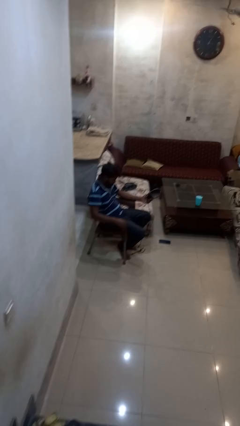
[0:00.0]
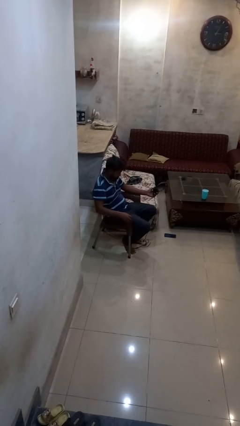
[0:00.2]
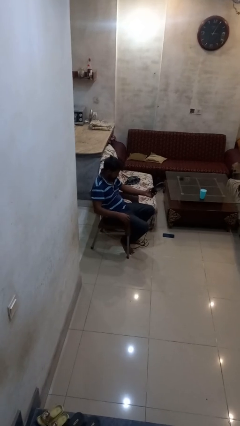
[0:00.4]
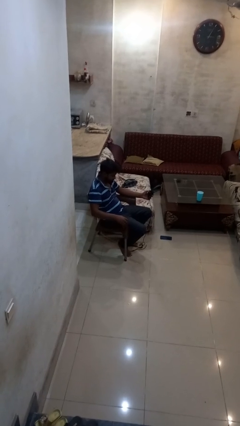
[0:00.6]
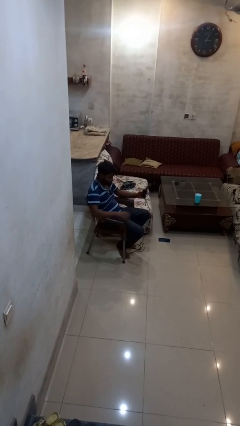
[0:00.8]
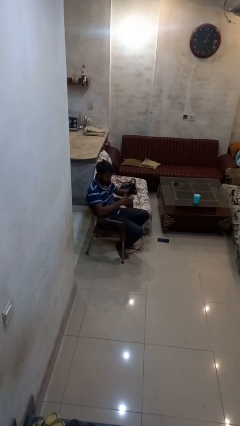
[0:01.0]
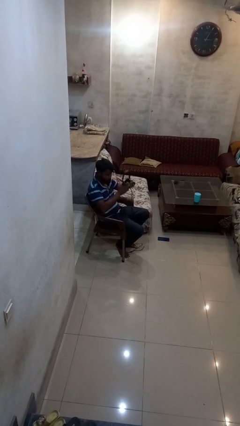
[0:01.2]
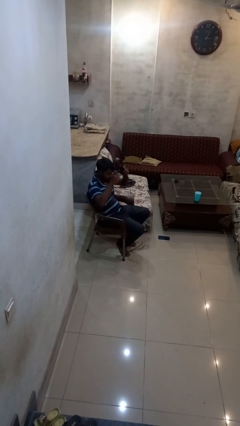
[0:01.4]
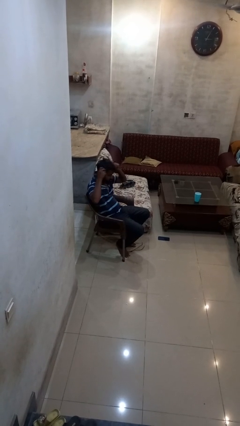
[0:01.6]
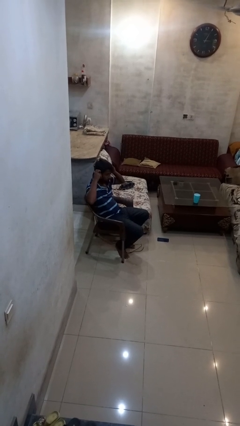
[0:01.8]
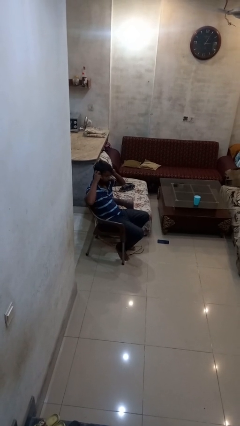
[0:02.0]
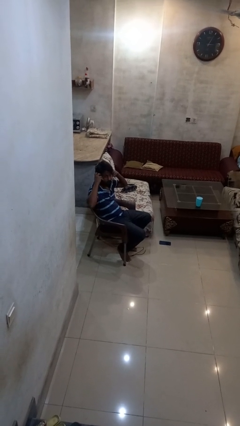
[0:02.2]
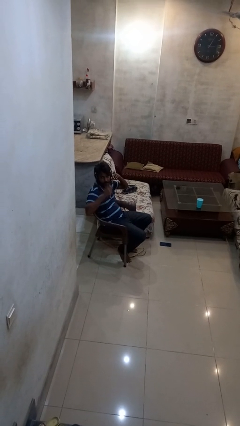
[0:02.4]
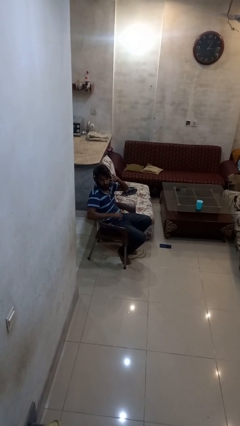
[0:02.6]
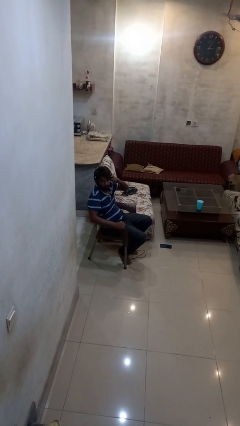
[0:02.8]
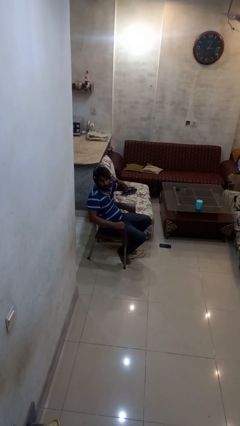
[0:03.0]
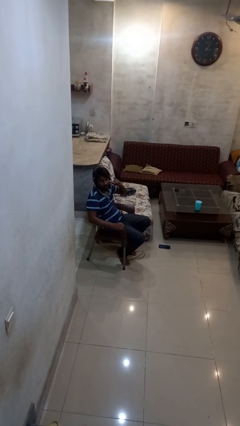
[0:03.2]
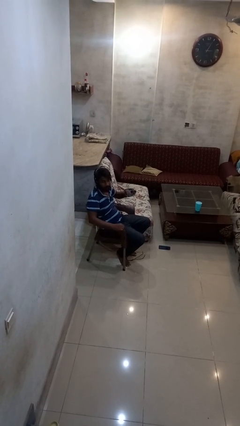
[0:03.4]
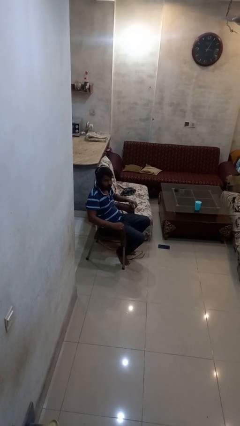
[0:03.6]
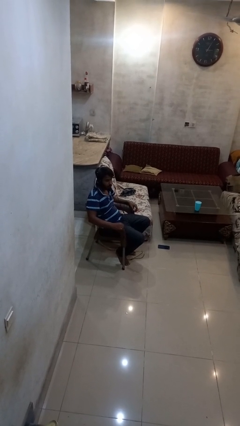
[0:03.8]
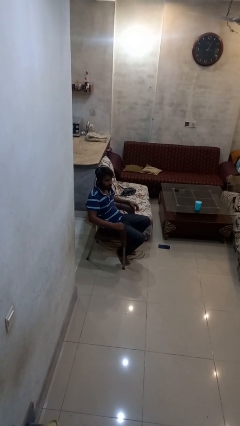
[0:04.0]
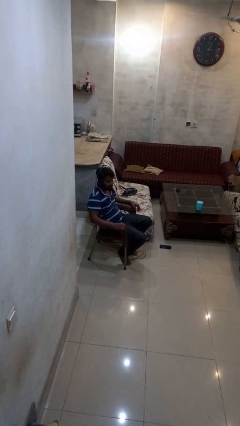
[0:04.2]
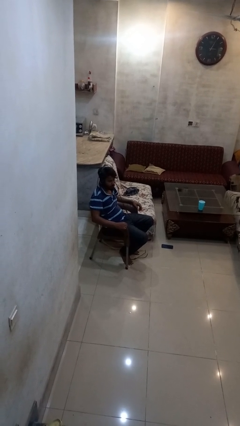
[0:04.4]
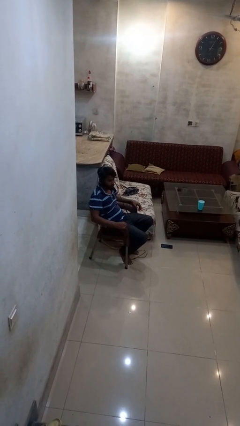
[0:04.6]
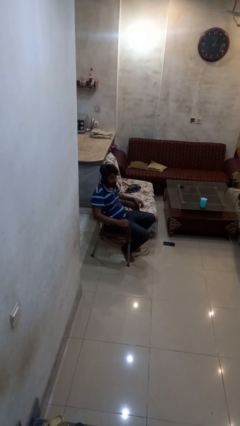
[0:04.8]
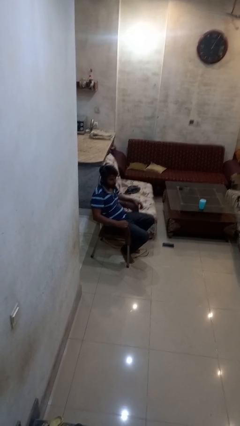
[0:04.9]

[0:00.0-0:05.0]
person puts on headphones

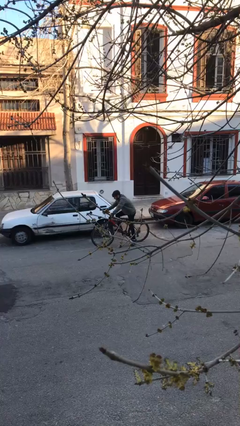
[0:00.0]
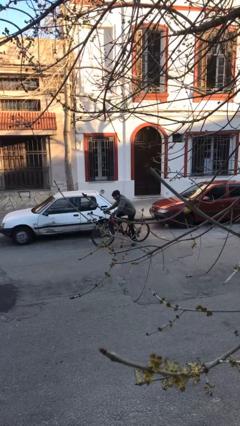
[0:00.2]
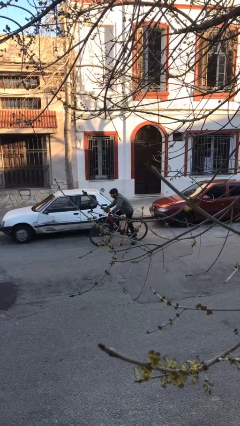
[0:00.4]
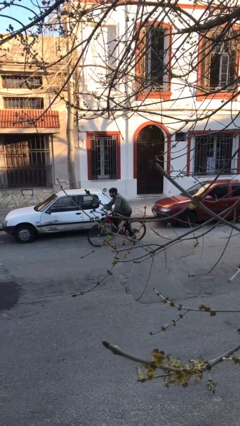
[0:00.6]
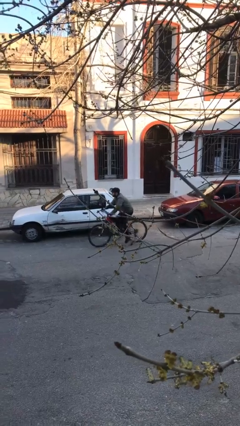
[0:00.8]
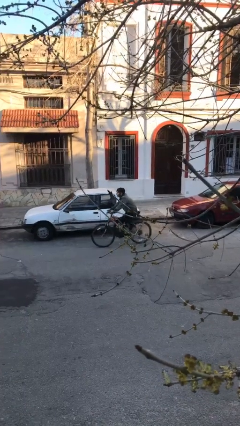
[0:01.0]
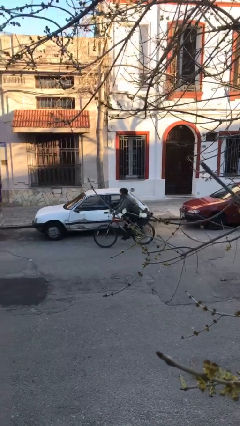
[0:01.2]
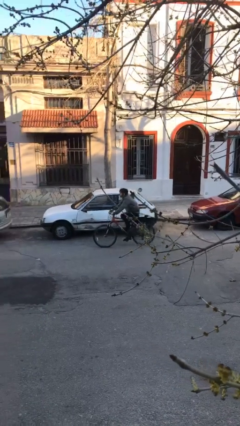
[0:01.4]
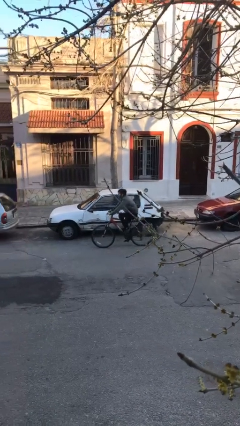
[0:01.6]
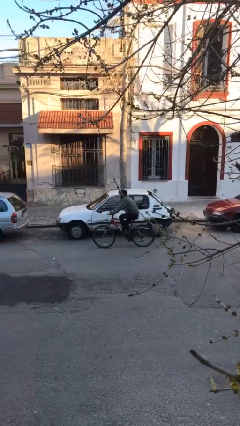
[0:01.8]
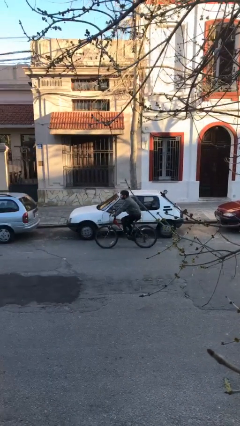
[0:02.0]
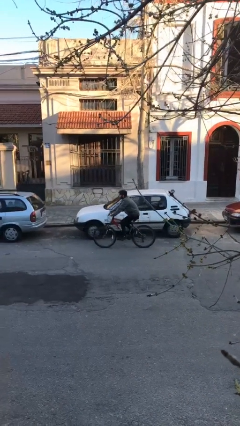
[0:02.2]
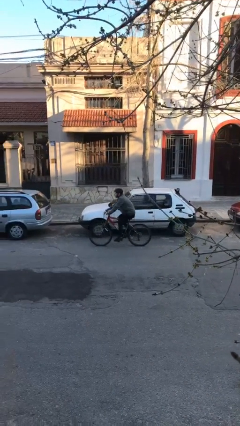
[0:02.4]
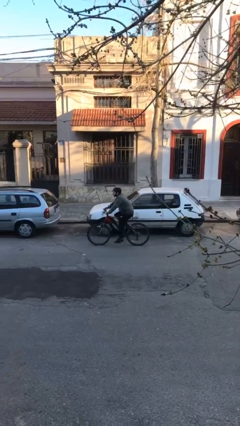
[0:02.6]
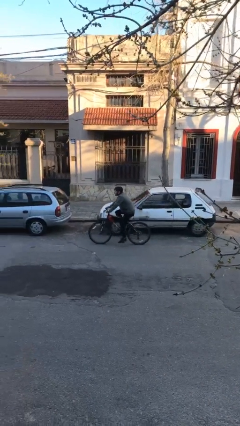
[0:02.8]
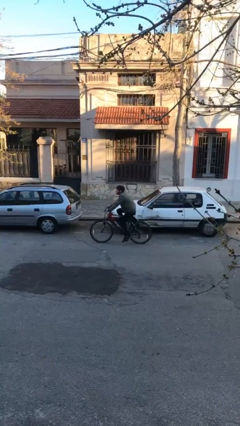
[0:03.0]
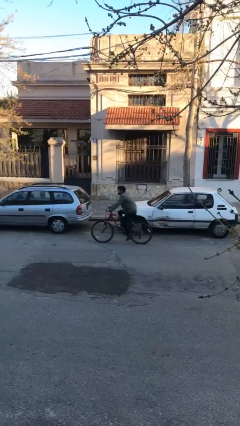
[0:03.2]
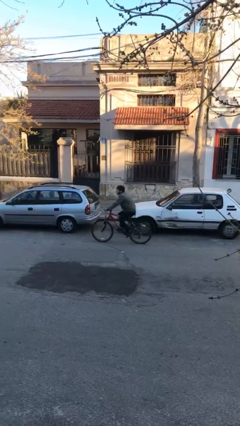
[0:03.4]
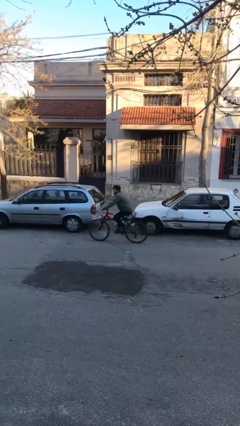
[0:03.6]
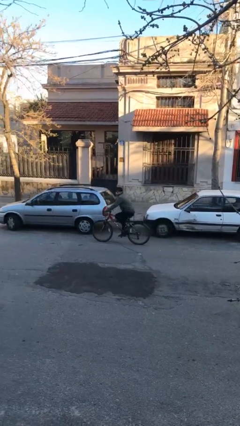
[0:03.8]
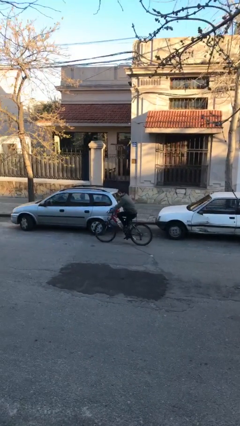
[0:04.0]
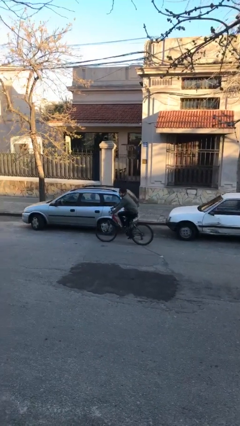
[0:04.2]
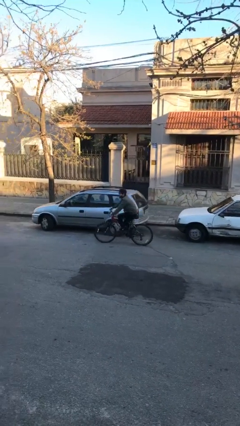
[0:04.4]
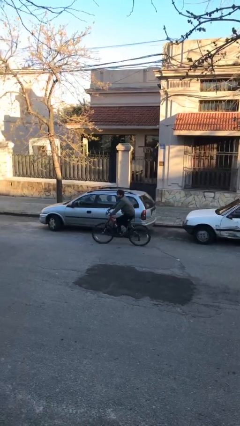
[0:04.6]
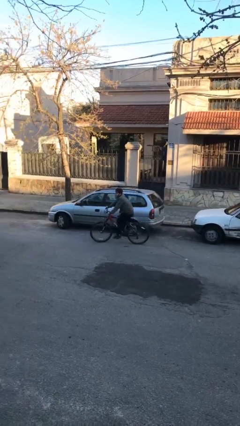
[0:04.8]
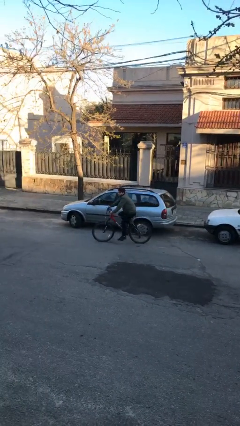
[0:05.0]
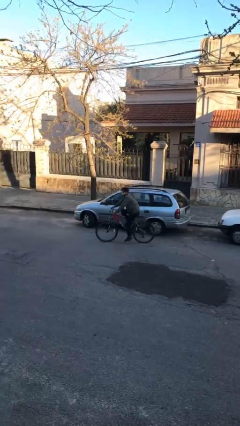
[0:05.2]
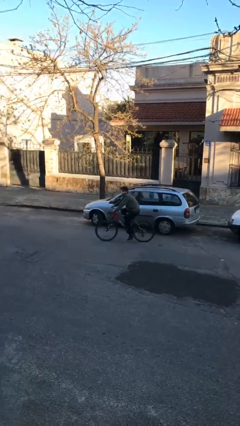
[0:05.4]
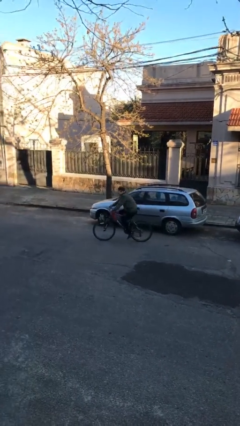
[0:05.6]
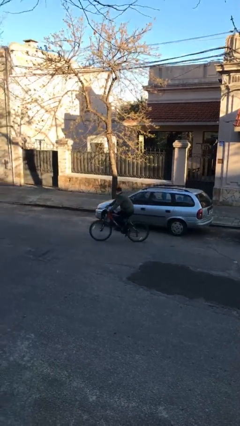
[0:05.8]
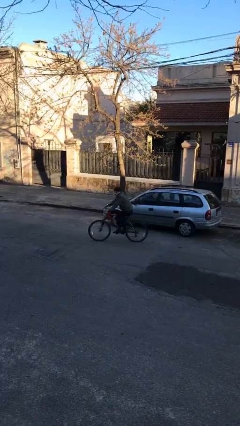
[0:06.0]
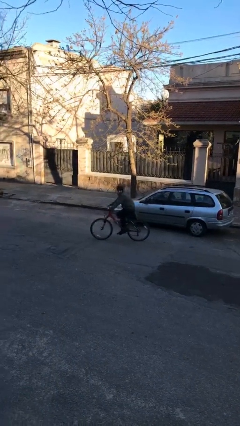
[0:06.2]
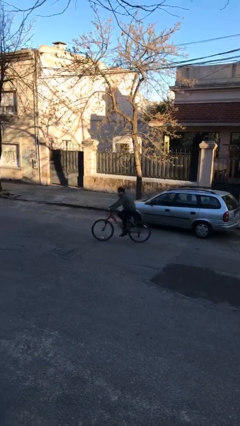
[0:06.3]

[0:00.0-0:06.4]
person rides bicycle

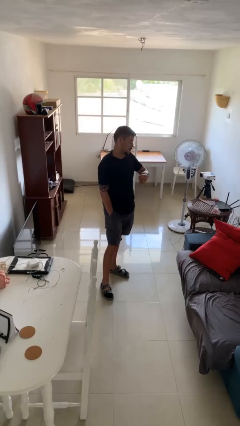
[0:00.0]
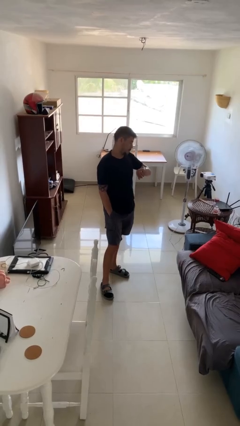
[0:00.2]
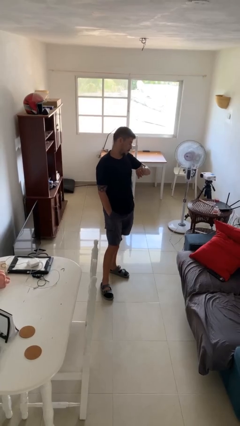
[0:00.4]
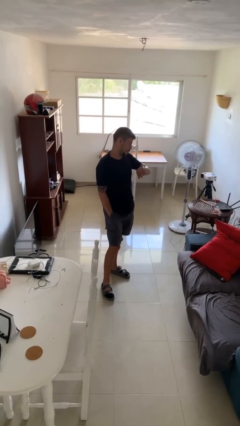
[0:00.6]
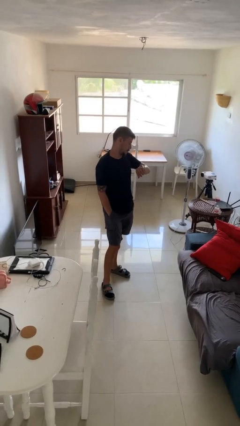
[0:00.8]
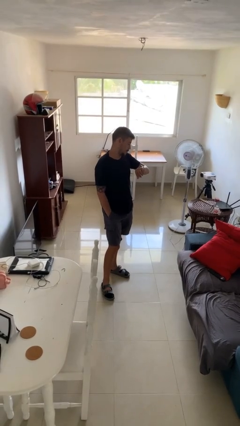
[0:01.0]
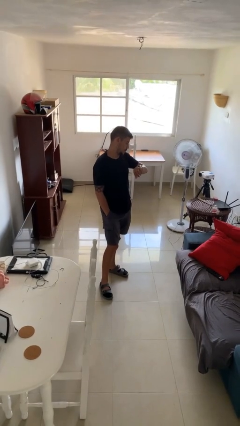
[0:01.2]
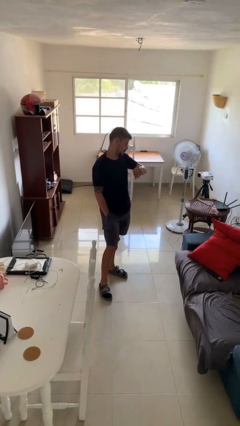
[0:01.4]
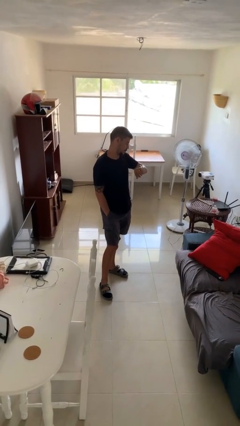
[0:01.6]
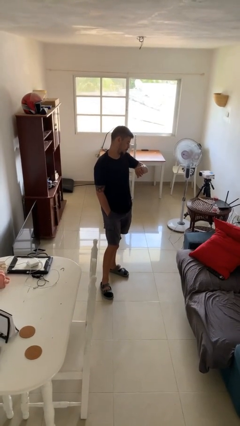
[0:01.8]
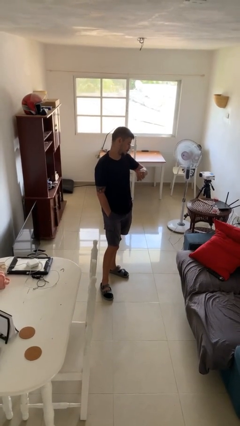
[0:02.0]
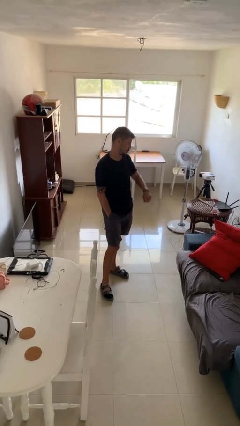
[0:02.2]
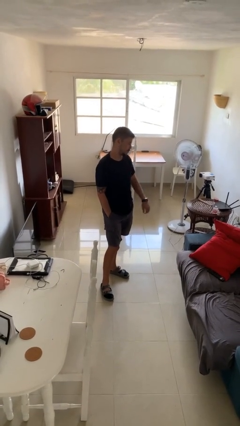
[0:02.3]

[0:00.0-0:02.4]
person looks at wristwatch

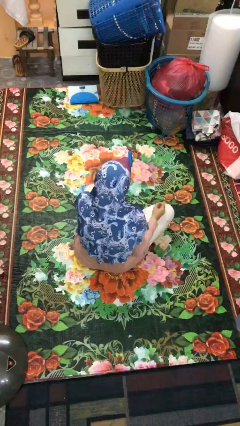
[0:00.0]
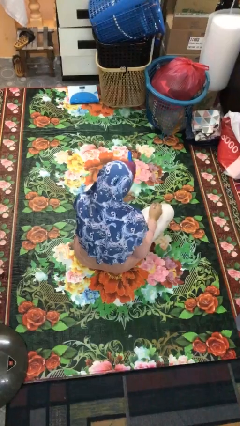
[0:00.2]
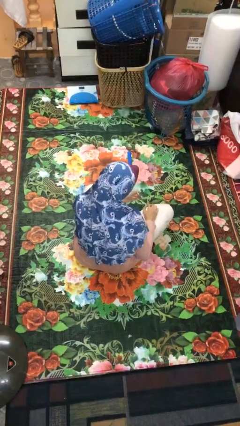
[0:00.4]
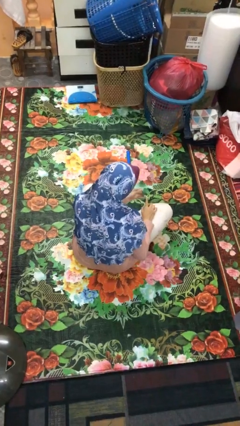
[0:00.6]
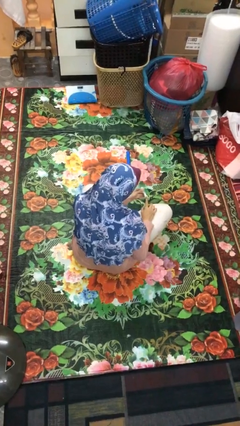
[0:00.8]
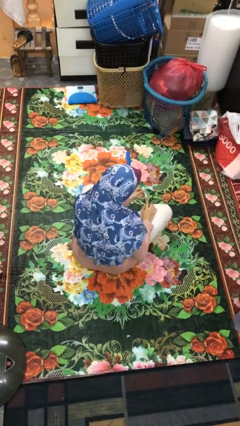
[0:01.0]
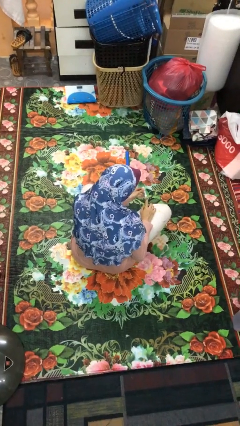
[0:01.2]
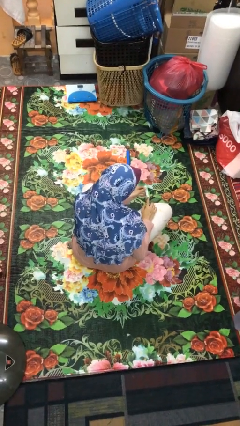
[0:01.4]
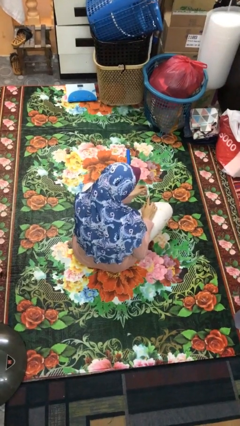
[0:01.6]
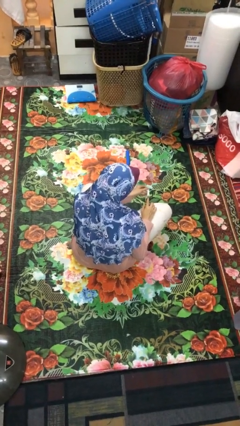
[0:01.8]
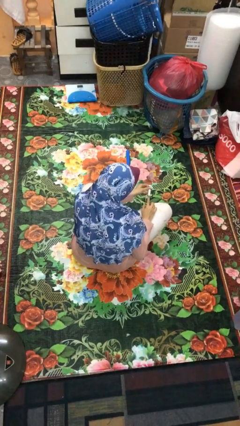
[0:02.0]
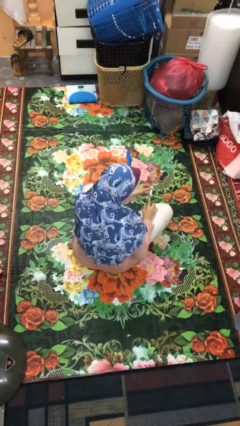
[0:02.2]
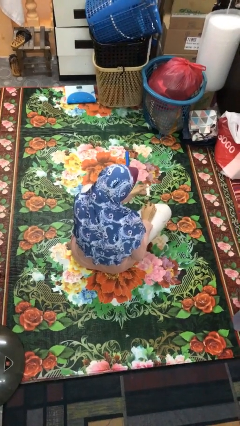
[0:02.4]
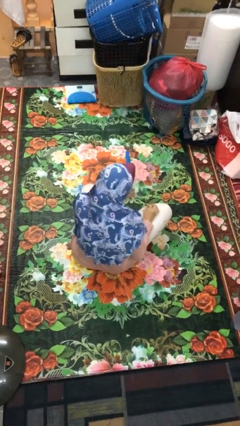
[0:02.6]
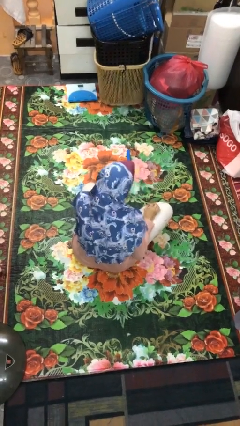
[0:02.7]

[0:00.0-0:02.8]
person clips fingernails

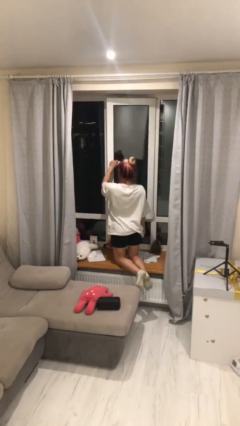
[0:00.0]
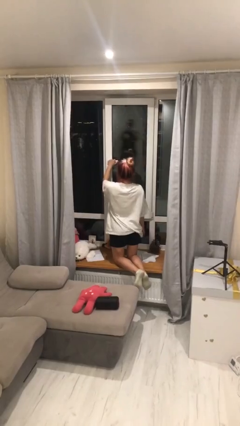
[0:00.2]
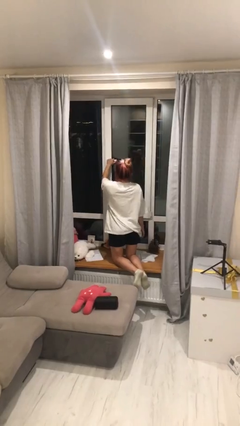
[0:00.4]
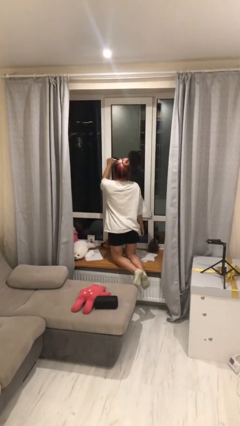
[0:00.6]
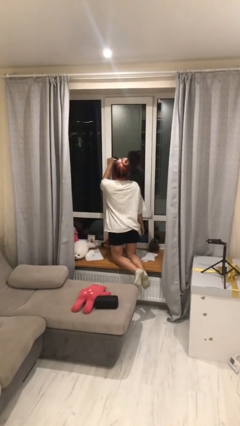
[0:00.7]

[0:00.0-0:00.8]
person closes home window

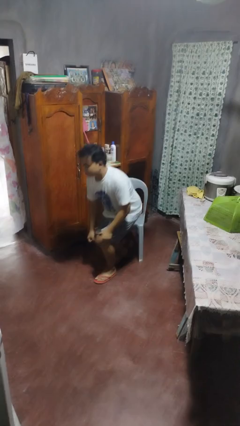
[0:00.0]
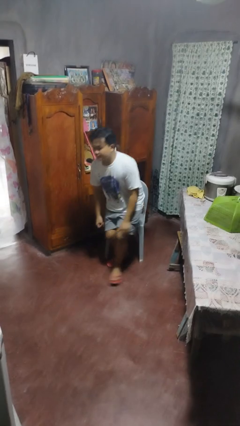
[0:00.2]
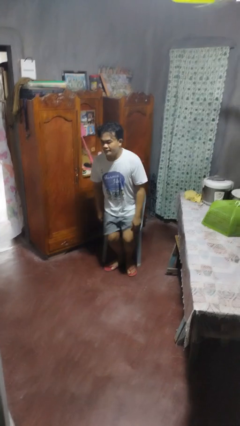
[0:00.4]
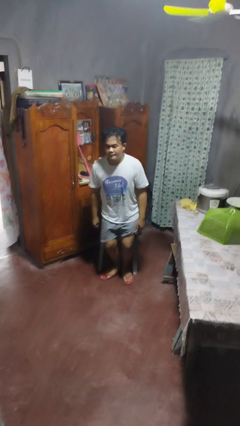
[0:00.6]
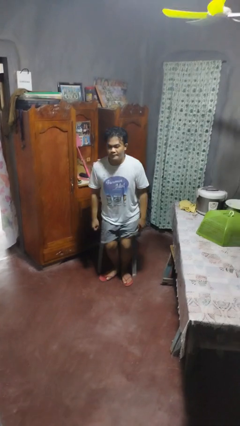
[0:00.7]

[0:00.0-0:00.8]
person stands up from floor
